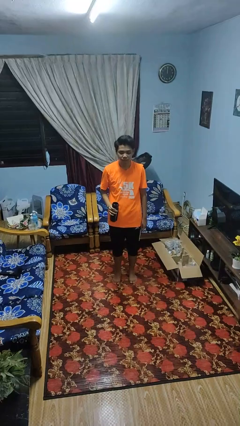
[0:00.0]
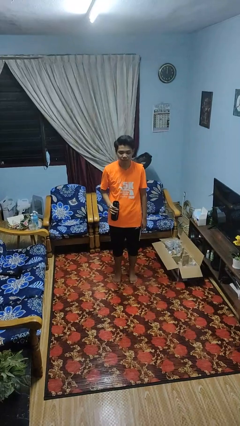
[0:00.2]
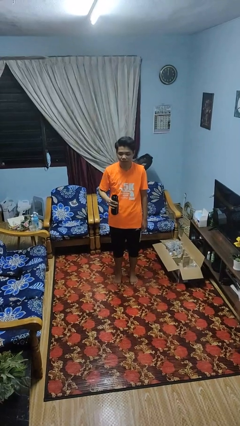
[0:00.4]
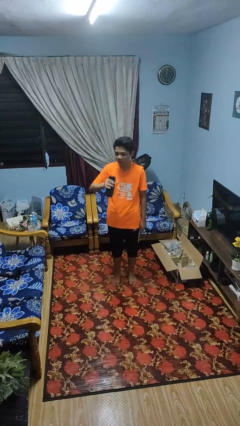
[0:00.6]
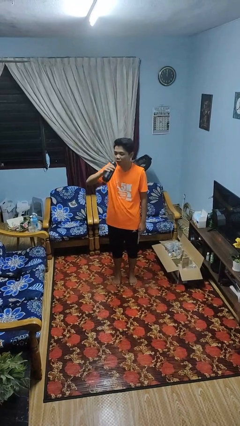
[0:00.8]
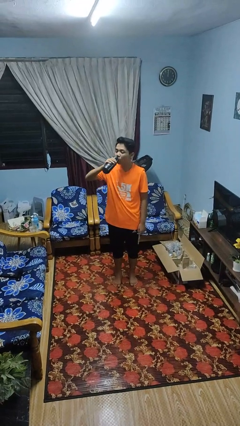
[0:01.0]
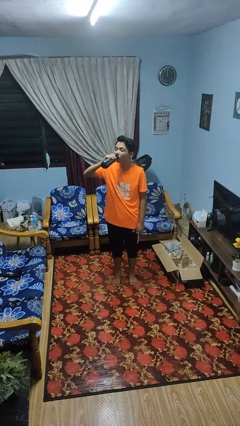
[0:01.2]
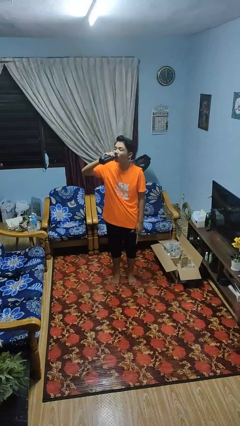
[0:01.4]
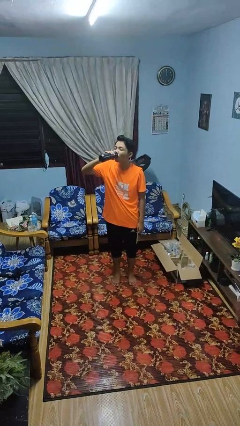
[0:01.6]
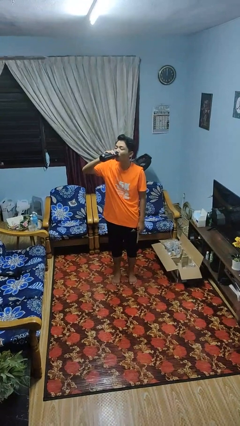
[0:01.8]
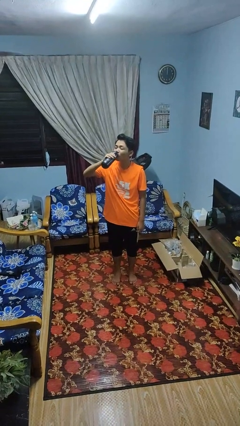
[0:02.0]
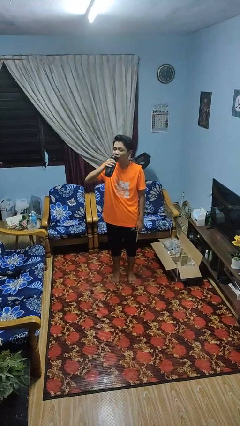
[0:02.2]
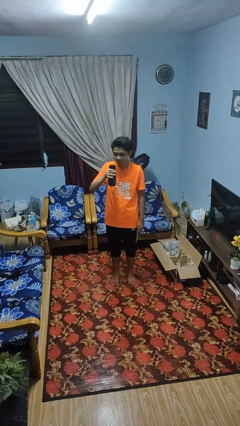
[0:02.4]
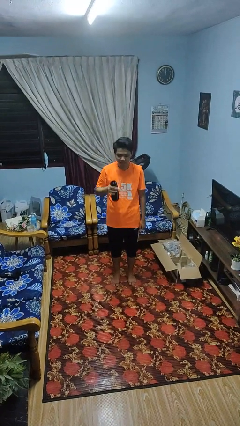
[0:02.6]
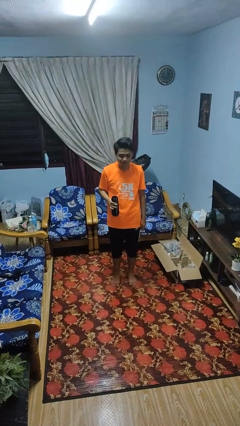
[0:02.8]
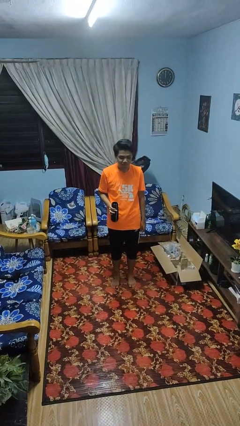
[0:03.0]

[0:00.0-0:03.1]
person drinks from bottle

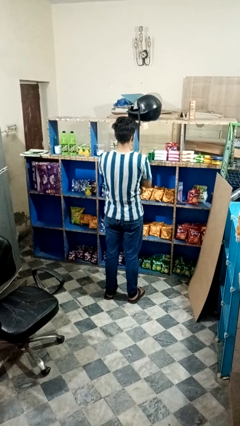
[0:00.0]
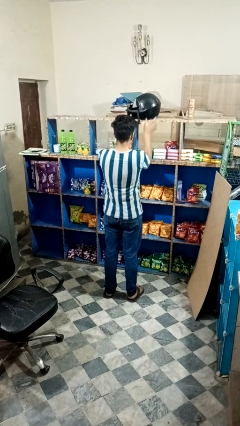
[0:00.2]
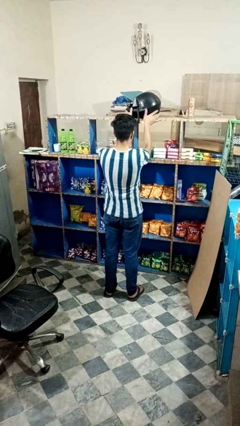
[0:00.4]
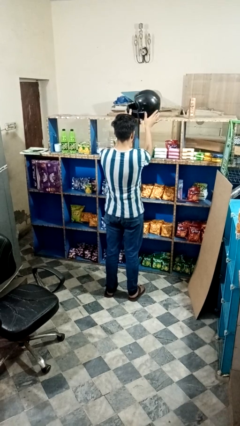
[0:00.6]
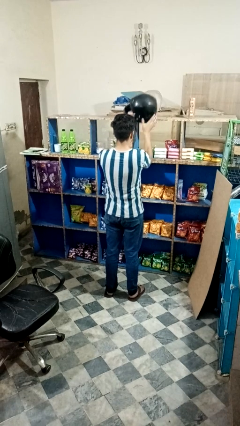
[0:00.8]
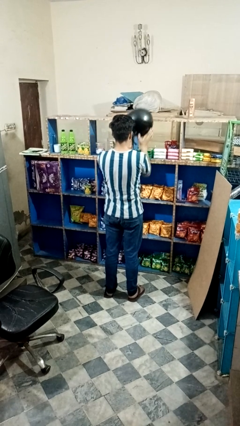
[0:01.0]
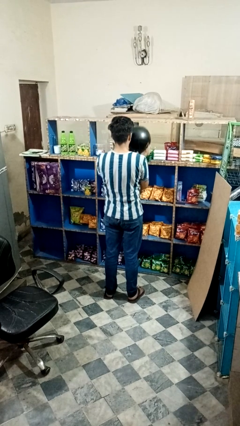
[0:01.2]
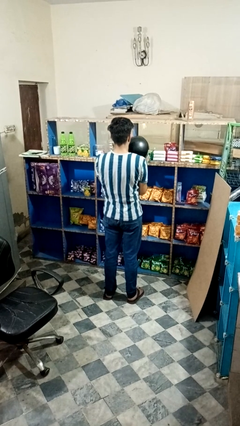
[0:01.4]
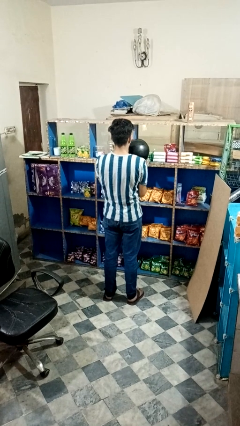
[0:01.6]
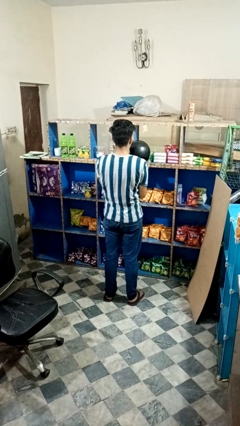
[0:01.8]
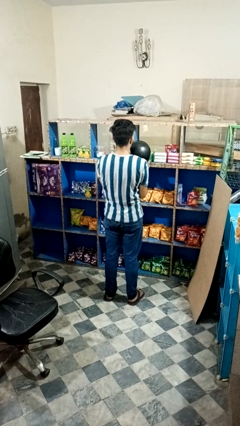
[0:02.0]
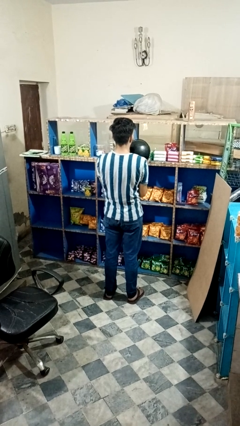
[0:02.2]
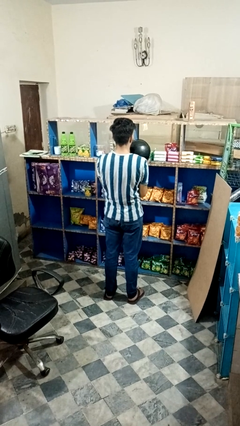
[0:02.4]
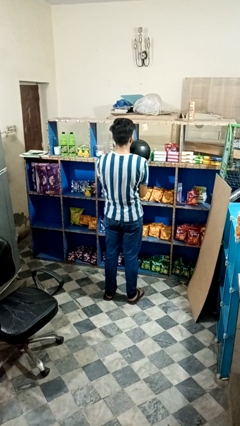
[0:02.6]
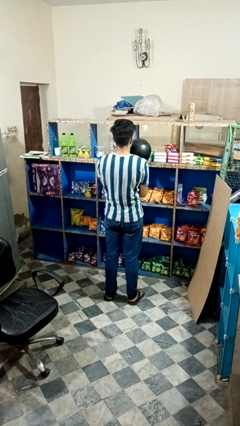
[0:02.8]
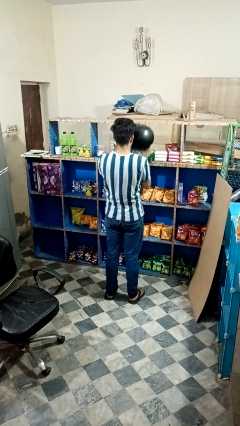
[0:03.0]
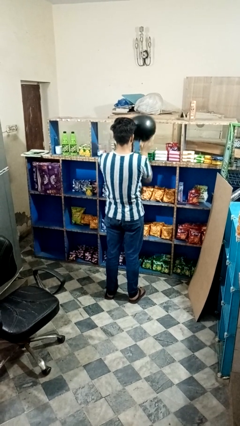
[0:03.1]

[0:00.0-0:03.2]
person picks up object from countertop

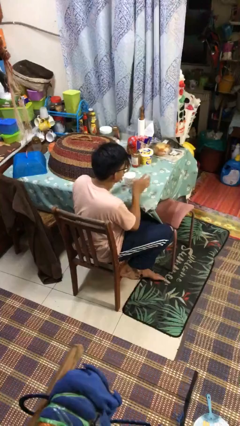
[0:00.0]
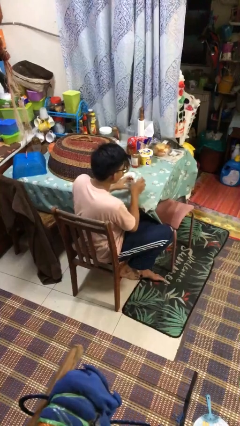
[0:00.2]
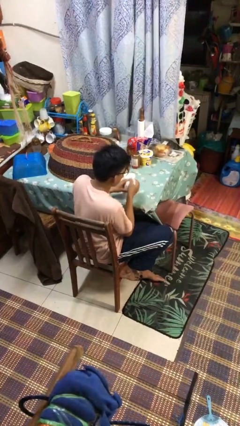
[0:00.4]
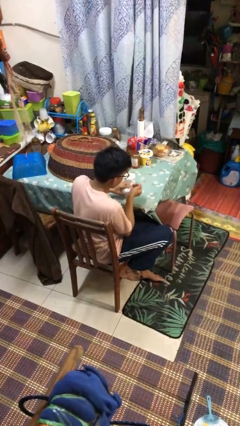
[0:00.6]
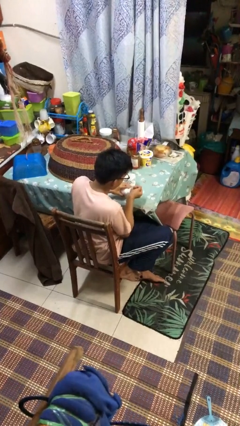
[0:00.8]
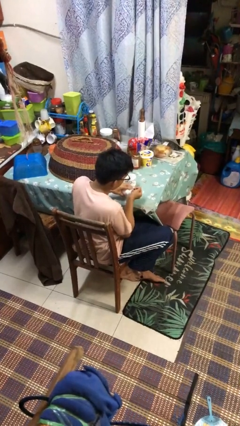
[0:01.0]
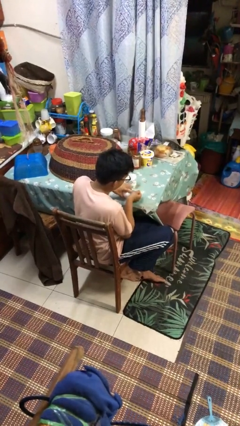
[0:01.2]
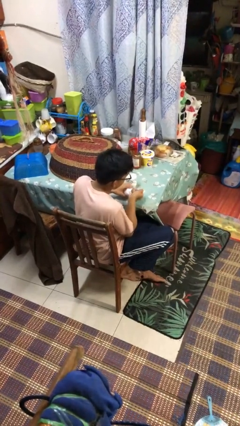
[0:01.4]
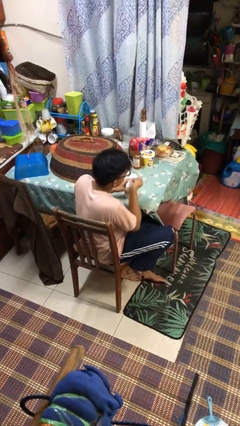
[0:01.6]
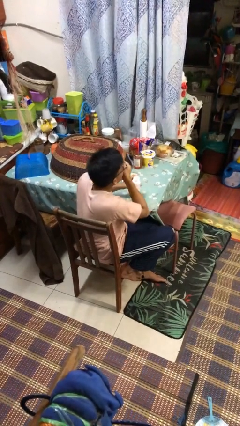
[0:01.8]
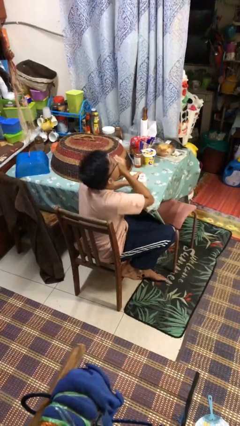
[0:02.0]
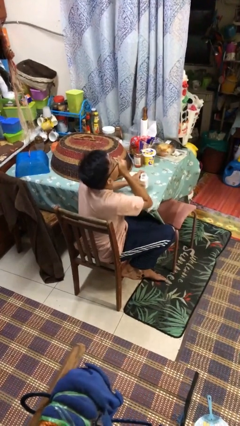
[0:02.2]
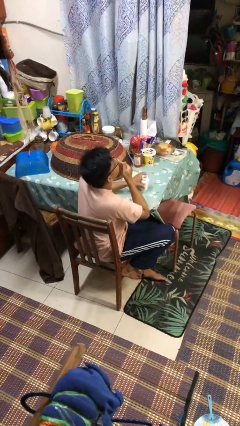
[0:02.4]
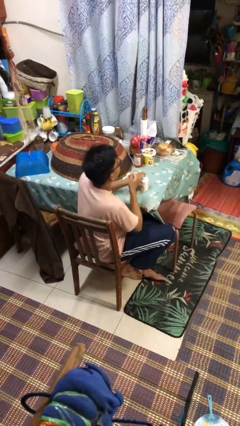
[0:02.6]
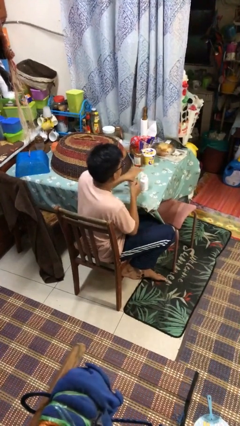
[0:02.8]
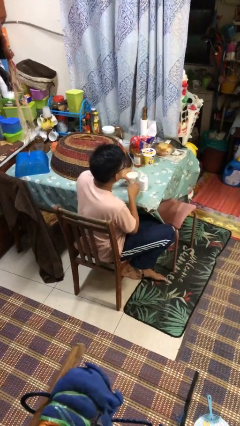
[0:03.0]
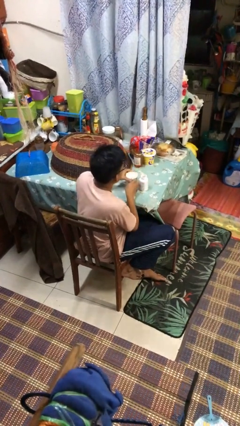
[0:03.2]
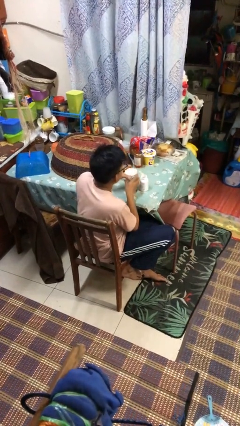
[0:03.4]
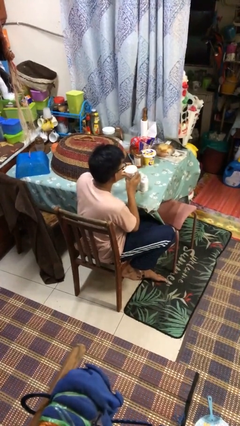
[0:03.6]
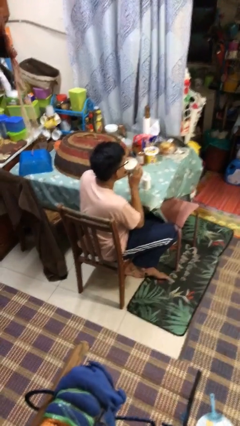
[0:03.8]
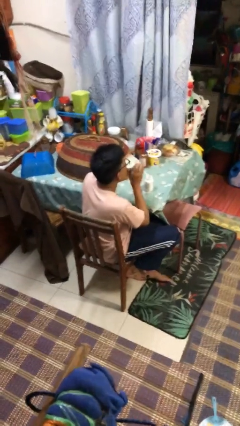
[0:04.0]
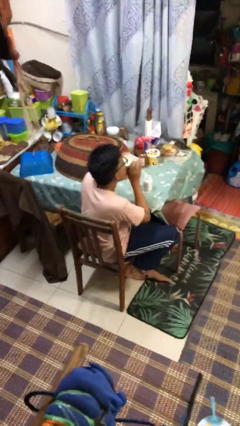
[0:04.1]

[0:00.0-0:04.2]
person takes medicine pills

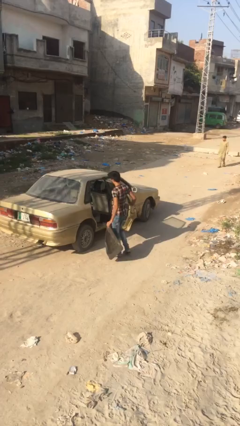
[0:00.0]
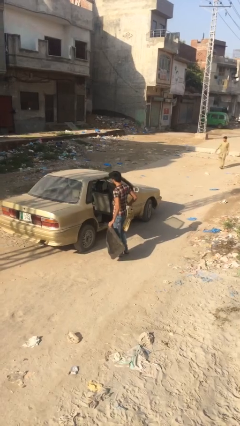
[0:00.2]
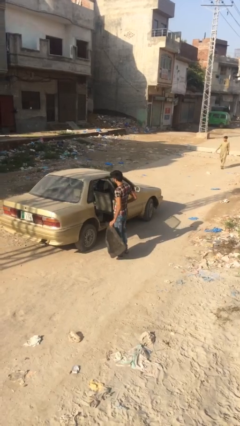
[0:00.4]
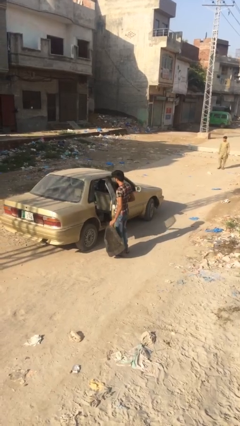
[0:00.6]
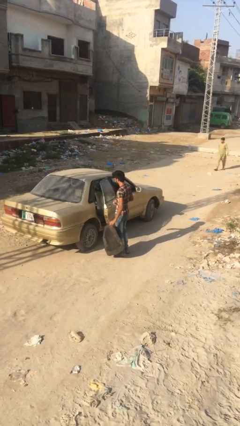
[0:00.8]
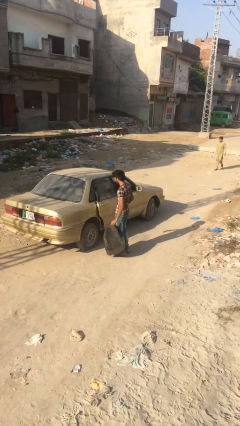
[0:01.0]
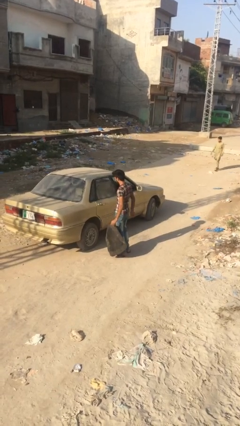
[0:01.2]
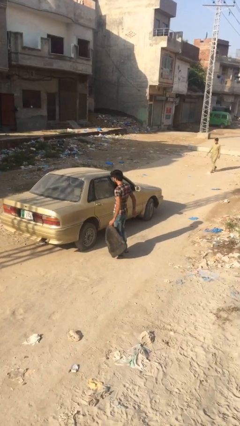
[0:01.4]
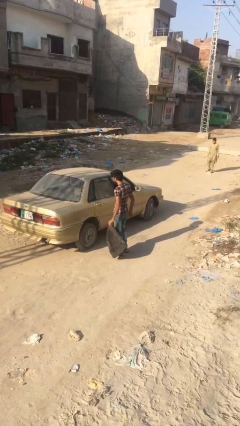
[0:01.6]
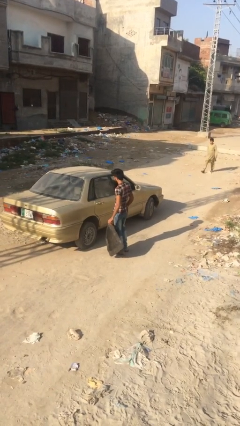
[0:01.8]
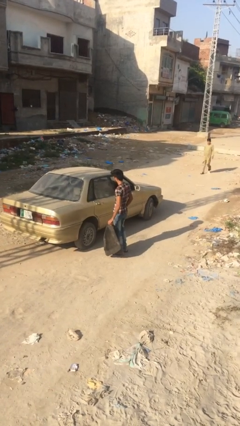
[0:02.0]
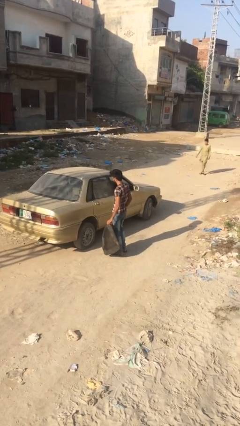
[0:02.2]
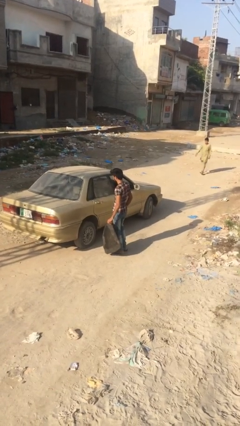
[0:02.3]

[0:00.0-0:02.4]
person closes car door

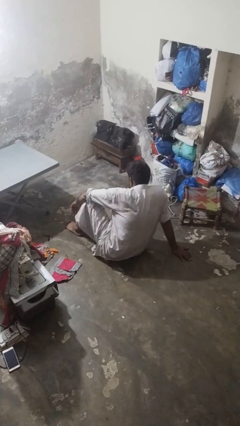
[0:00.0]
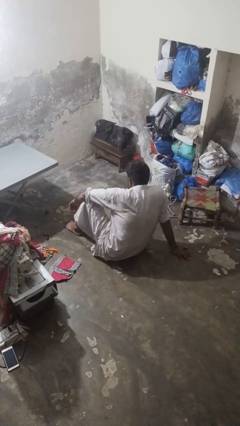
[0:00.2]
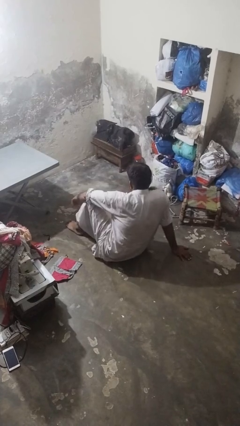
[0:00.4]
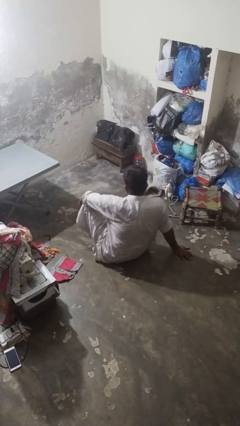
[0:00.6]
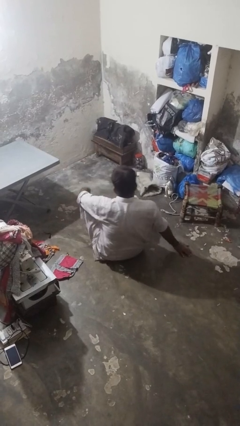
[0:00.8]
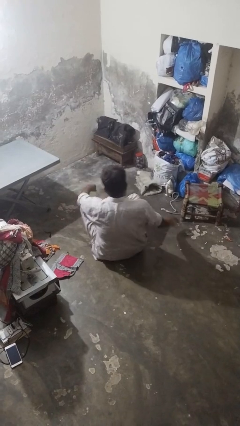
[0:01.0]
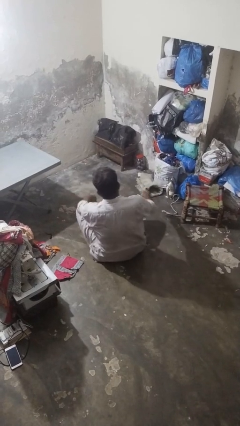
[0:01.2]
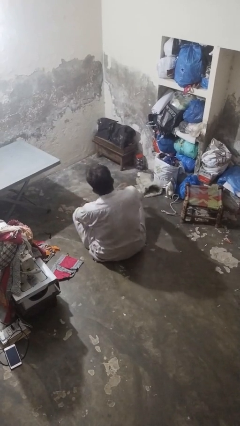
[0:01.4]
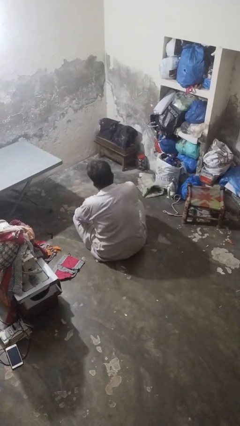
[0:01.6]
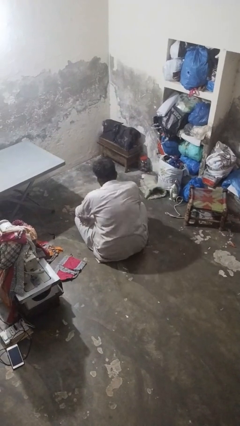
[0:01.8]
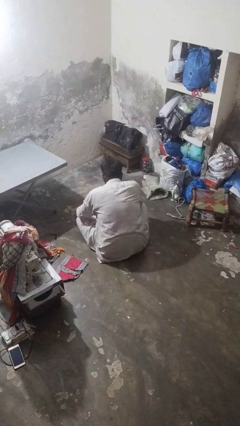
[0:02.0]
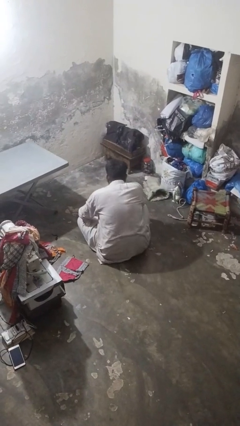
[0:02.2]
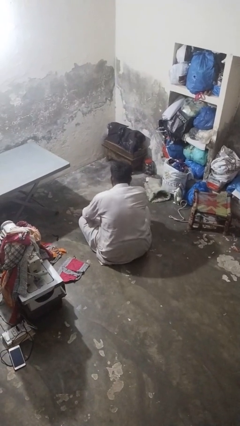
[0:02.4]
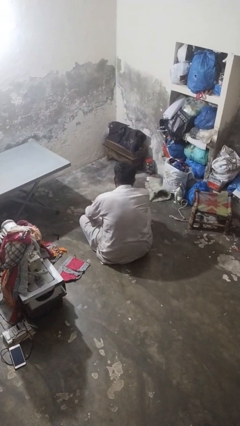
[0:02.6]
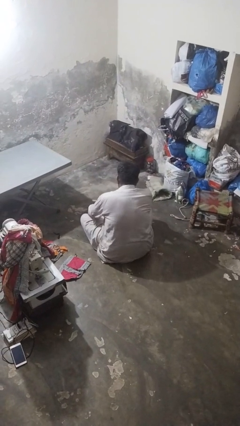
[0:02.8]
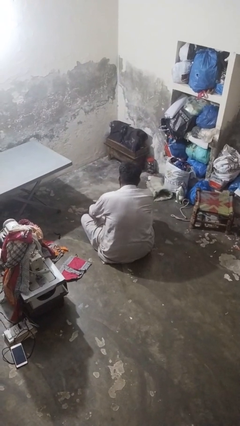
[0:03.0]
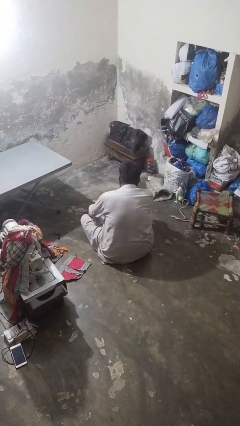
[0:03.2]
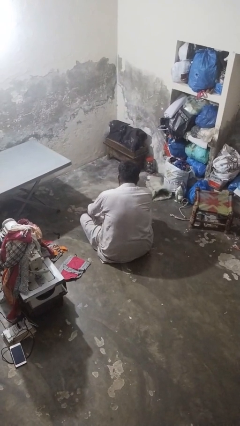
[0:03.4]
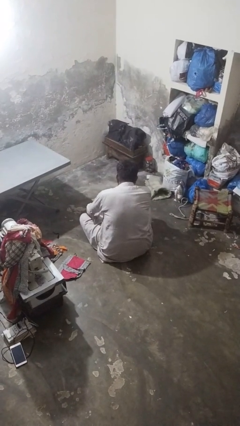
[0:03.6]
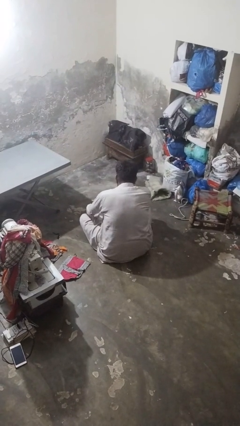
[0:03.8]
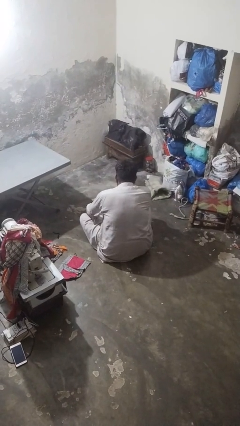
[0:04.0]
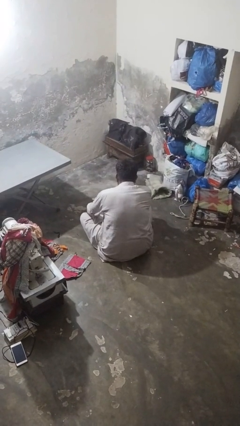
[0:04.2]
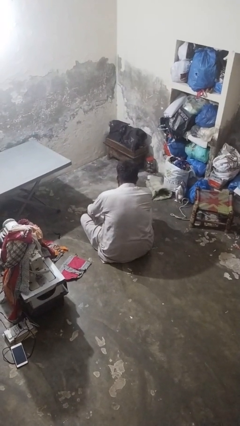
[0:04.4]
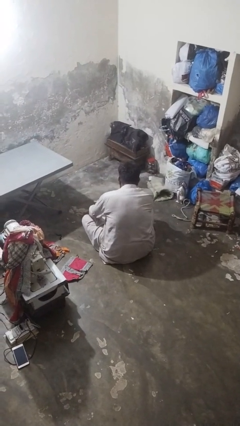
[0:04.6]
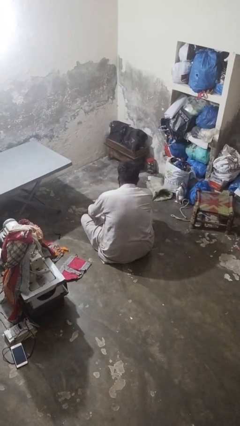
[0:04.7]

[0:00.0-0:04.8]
person crosses legs
